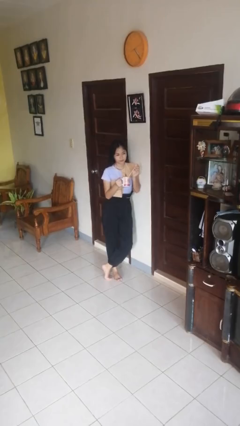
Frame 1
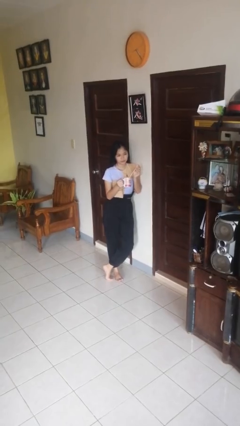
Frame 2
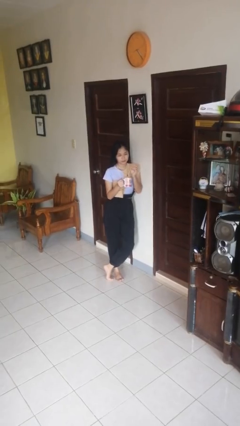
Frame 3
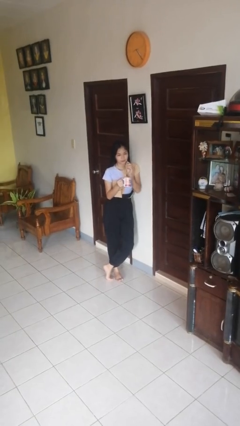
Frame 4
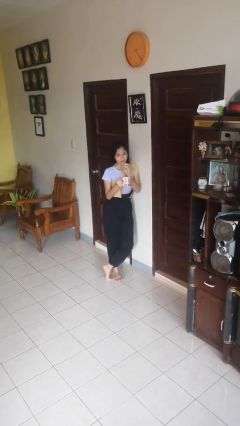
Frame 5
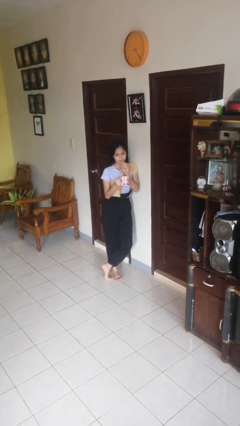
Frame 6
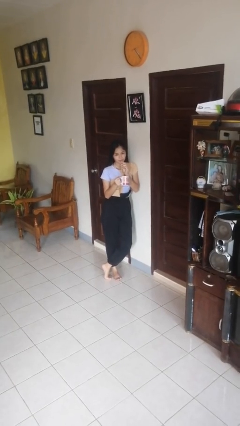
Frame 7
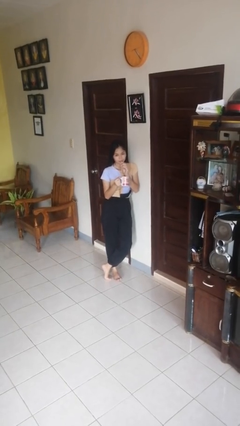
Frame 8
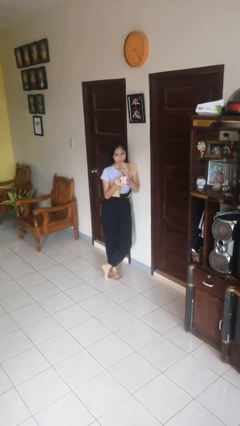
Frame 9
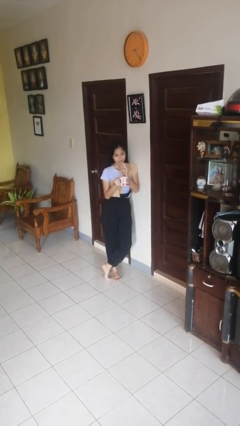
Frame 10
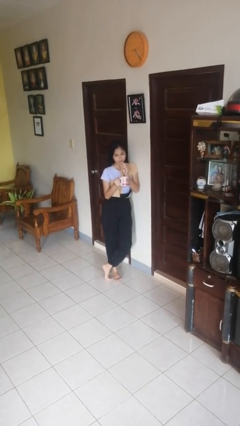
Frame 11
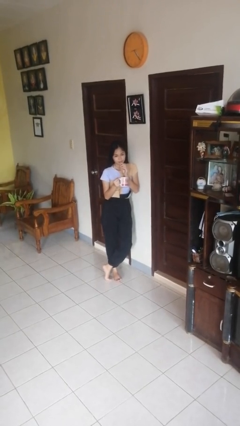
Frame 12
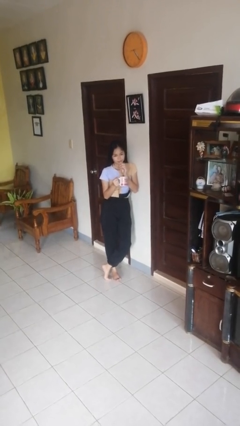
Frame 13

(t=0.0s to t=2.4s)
person drinks from straw

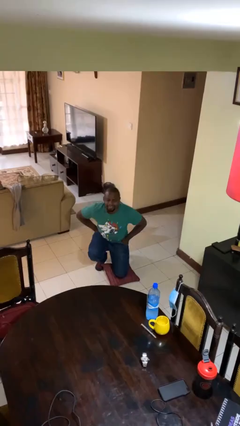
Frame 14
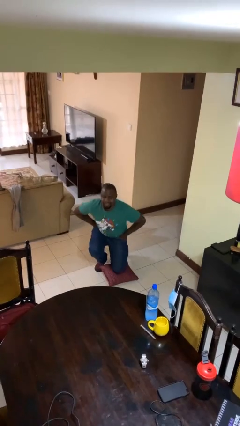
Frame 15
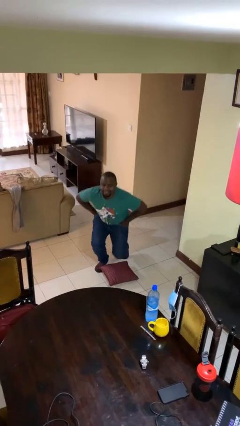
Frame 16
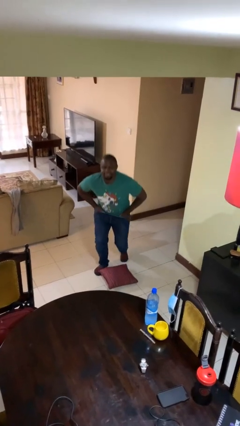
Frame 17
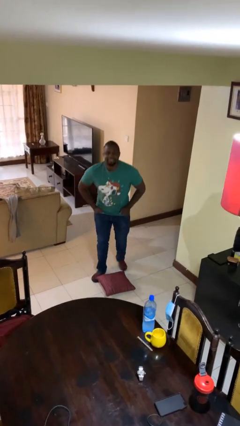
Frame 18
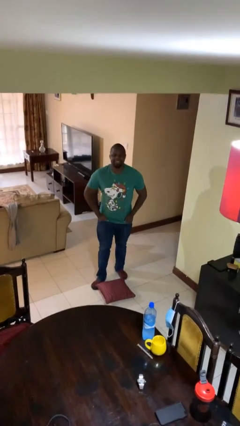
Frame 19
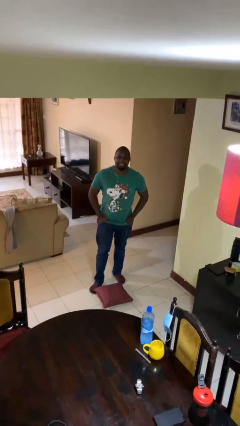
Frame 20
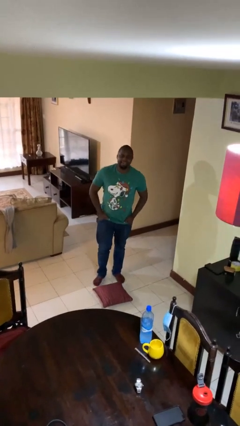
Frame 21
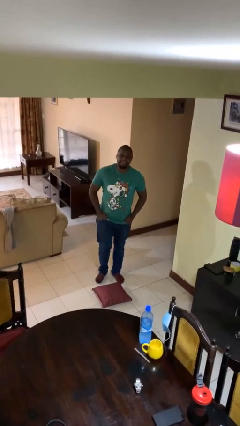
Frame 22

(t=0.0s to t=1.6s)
person stands up from floor

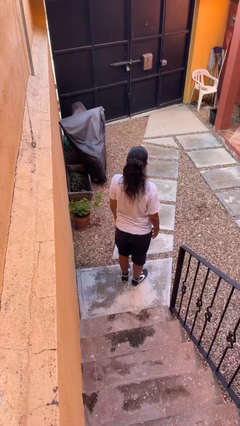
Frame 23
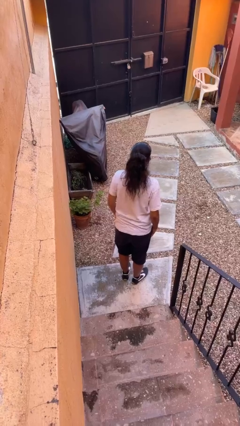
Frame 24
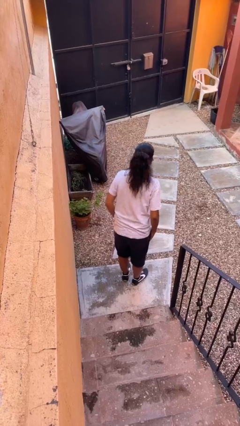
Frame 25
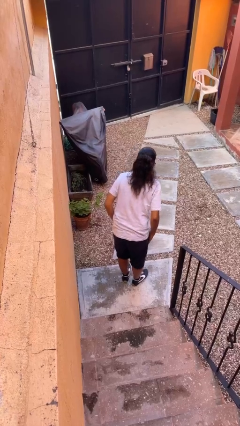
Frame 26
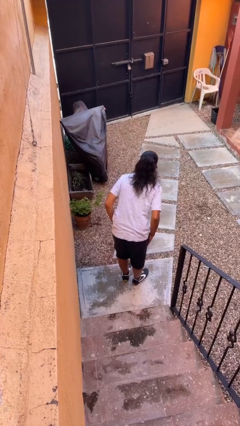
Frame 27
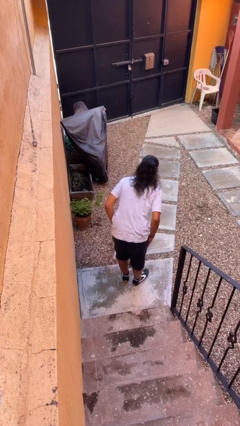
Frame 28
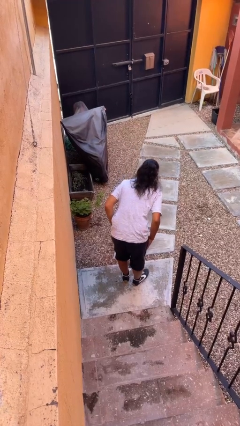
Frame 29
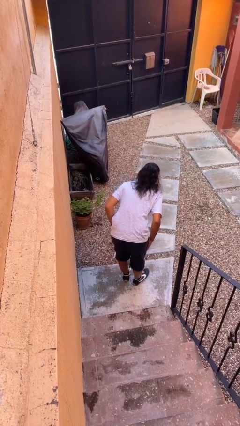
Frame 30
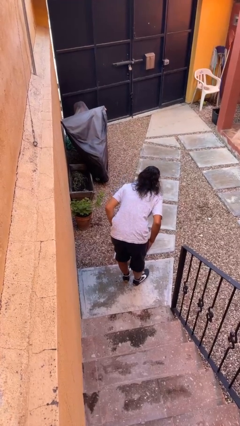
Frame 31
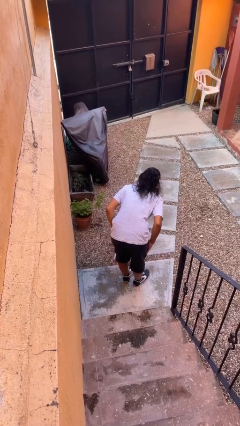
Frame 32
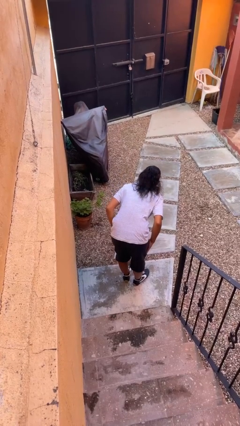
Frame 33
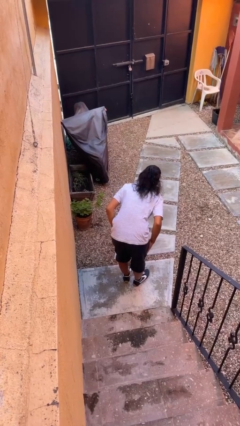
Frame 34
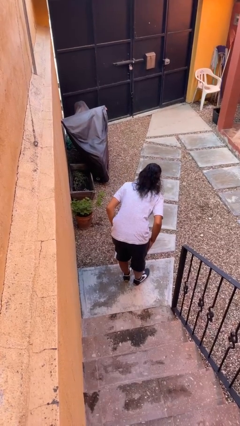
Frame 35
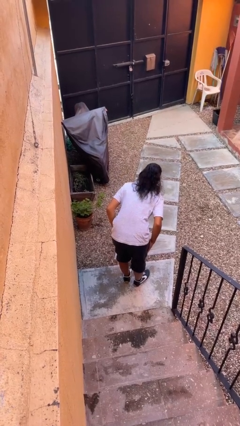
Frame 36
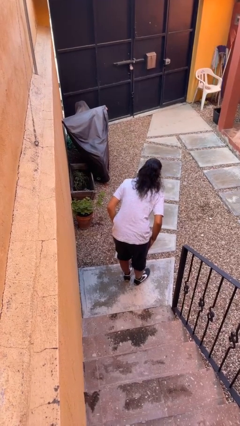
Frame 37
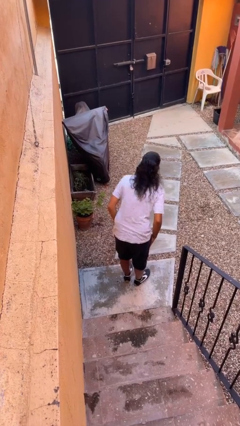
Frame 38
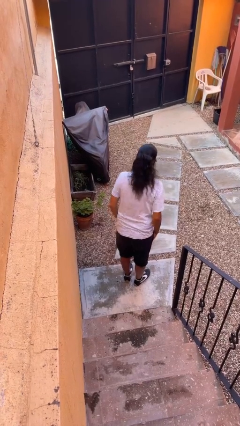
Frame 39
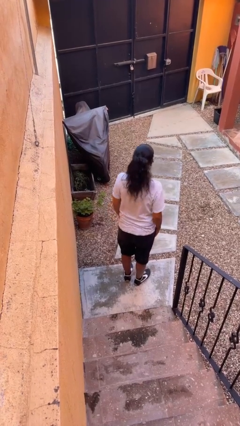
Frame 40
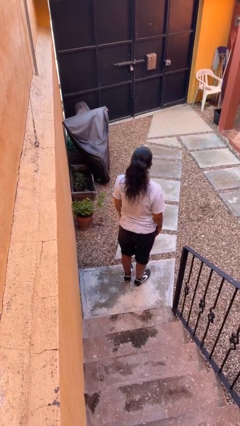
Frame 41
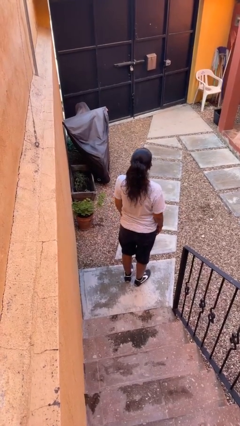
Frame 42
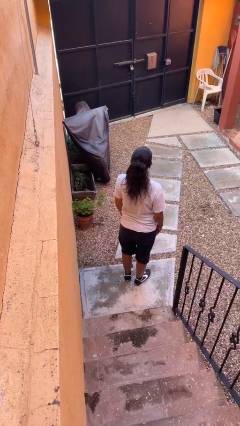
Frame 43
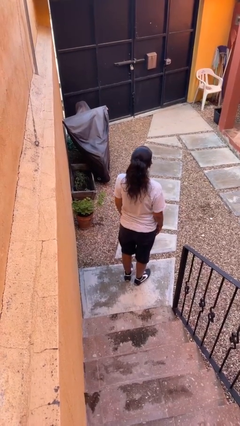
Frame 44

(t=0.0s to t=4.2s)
person bows

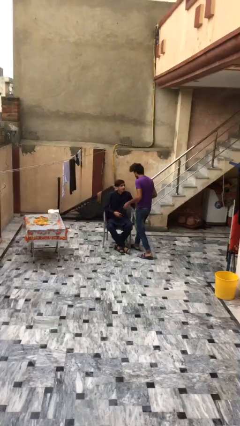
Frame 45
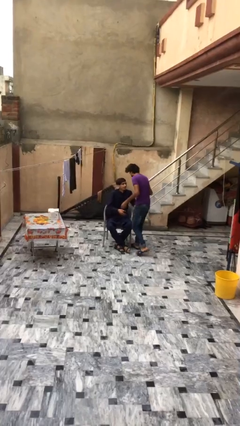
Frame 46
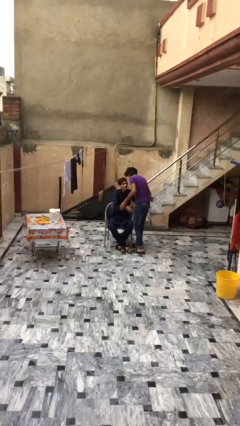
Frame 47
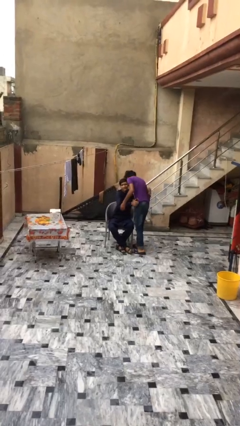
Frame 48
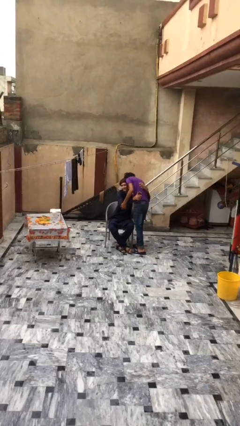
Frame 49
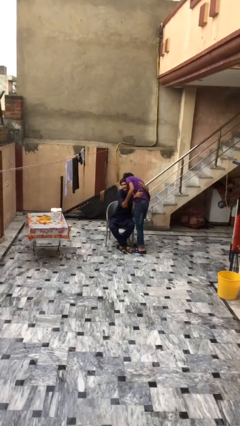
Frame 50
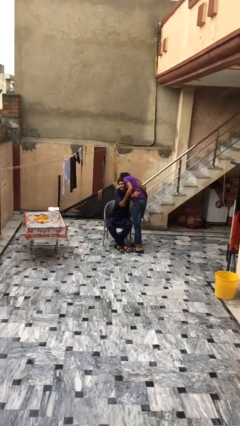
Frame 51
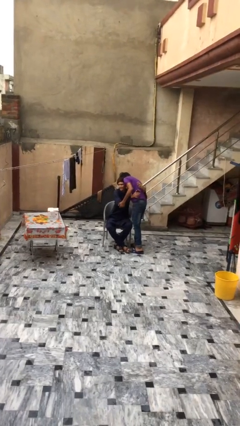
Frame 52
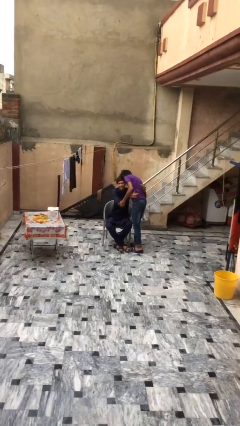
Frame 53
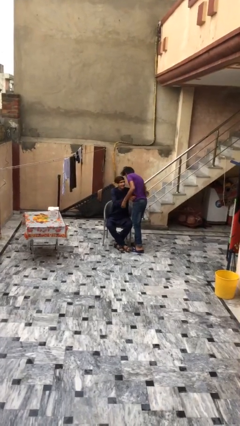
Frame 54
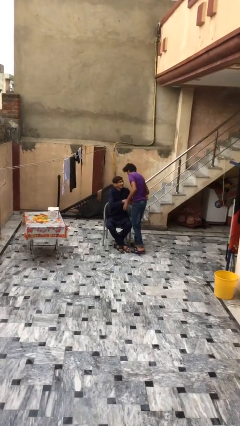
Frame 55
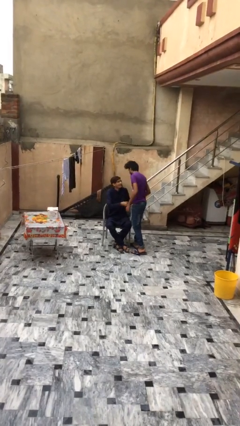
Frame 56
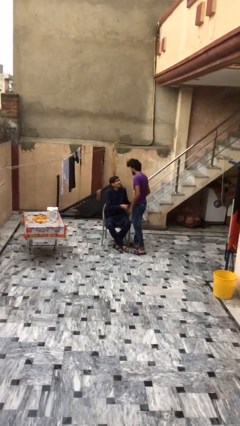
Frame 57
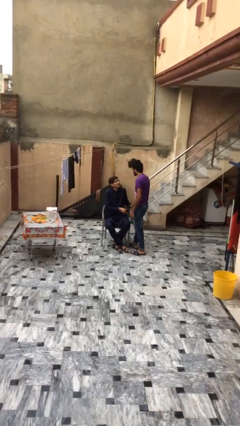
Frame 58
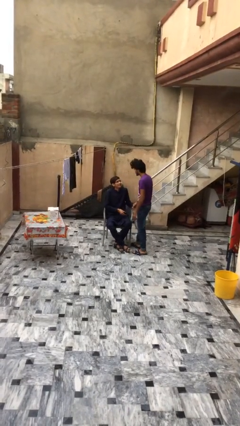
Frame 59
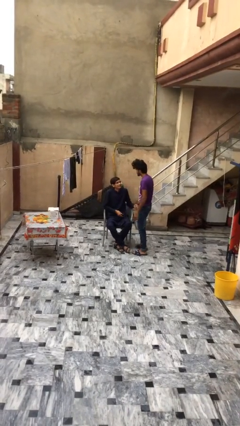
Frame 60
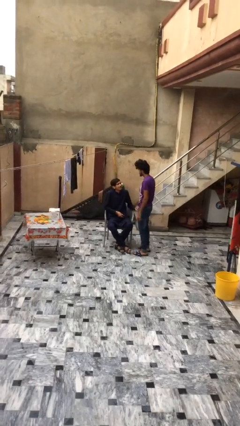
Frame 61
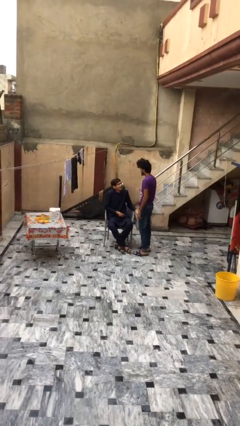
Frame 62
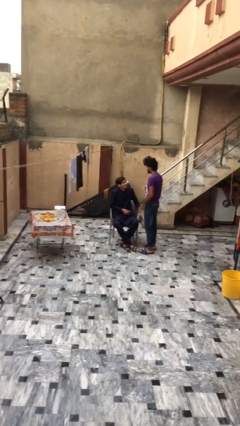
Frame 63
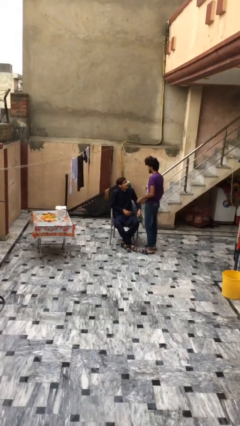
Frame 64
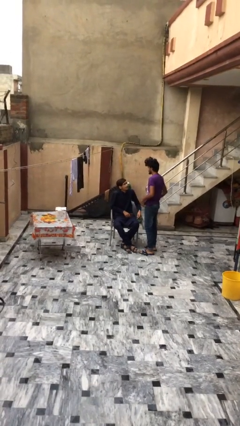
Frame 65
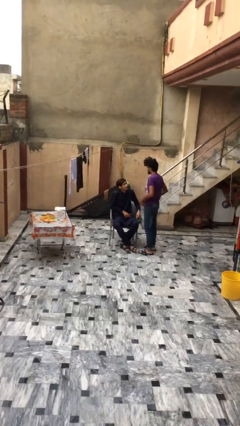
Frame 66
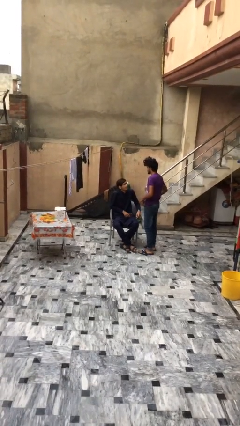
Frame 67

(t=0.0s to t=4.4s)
person embraces person

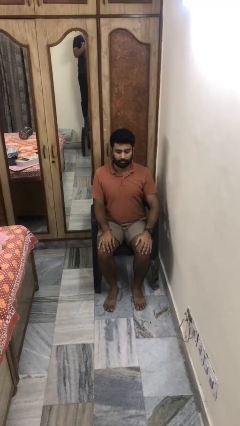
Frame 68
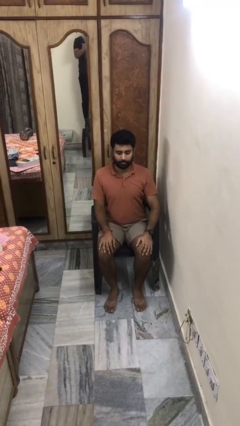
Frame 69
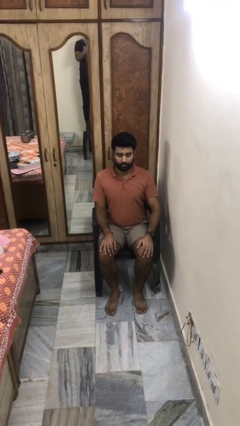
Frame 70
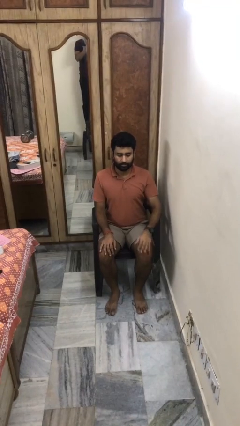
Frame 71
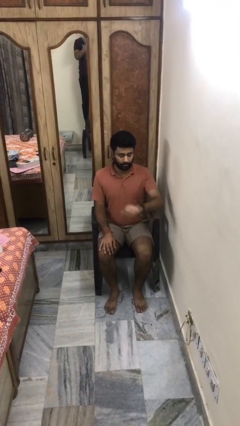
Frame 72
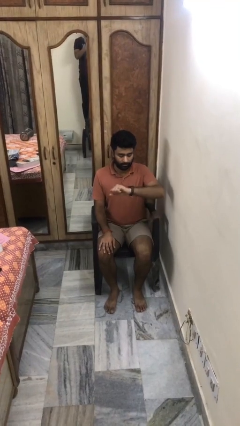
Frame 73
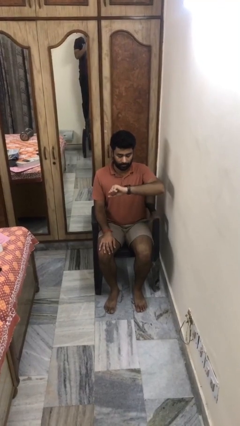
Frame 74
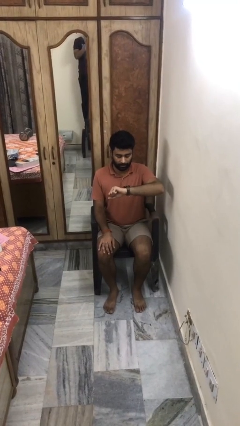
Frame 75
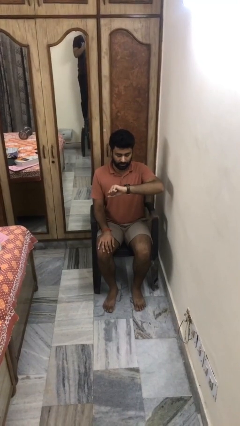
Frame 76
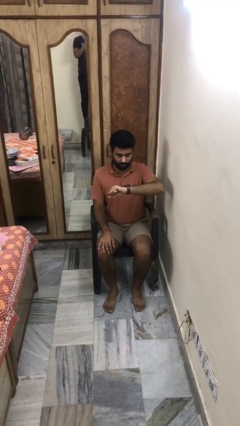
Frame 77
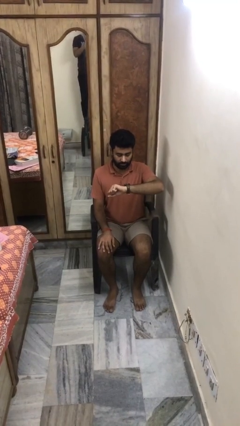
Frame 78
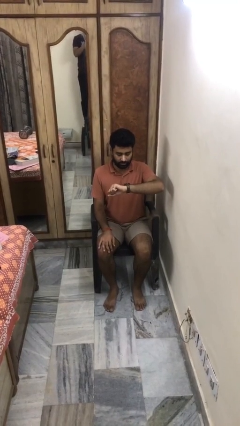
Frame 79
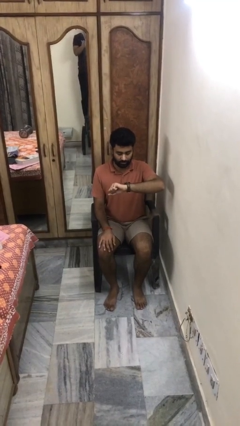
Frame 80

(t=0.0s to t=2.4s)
person looks at wristwatch

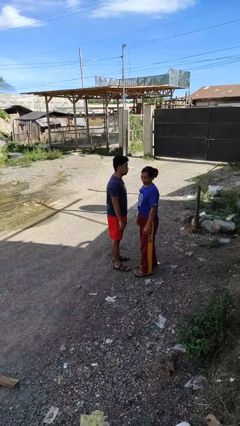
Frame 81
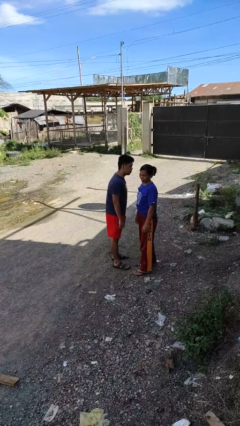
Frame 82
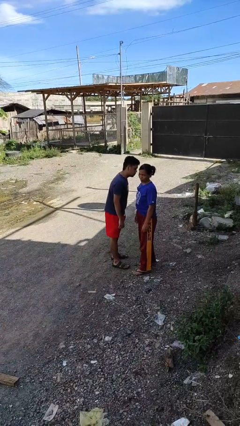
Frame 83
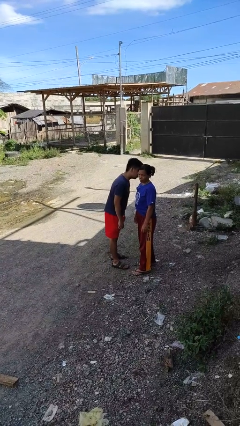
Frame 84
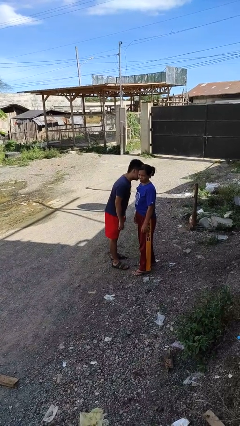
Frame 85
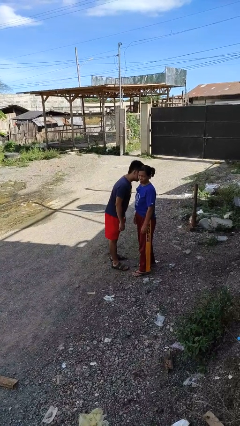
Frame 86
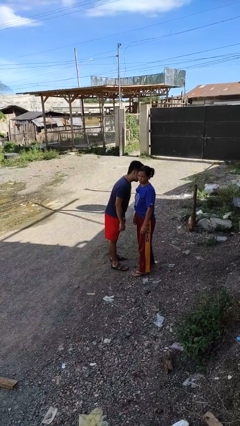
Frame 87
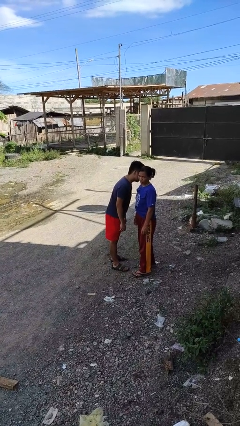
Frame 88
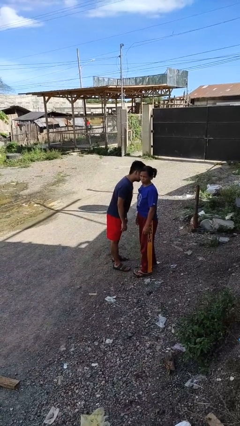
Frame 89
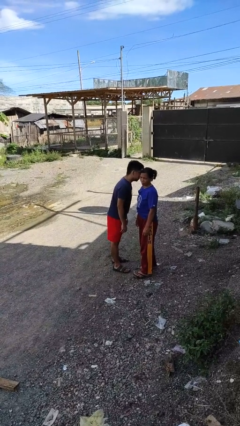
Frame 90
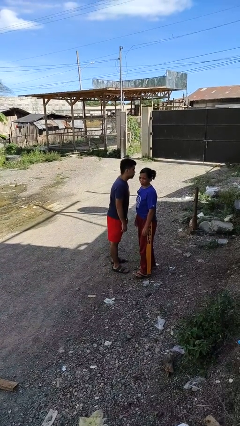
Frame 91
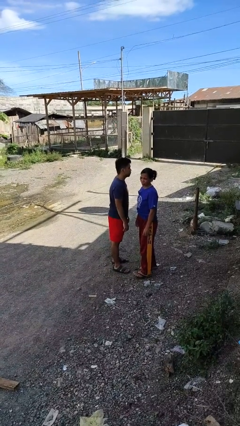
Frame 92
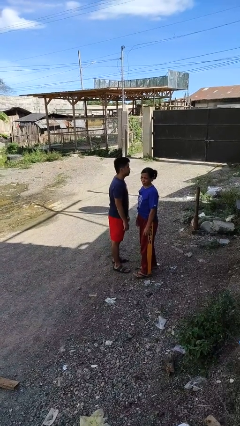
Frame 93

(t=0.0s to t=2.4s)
person kisses cheek of person
